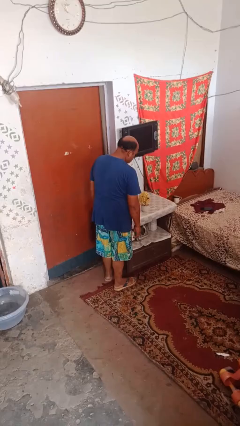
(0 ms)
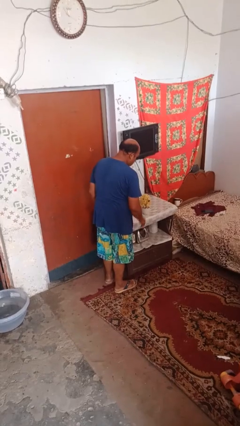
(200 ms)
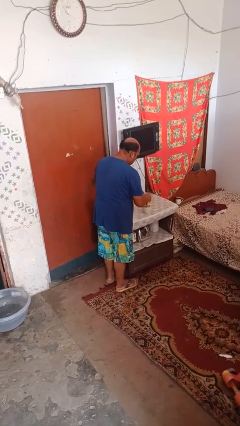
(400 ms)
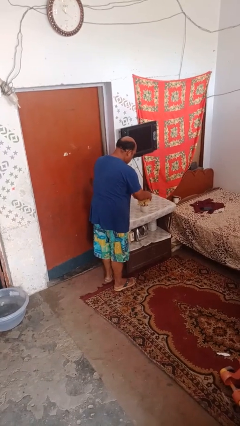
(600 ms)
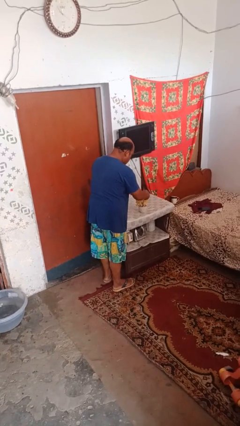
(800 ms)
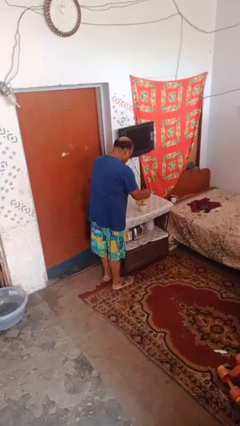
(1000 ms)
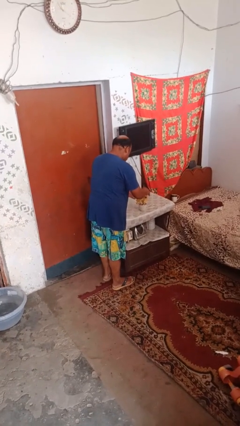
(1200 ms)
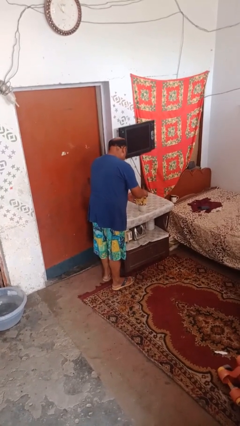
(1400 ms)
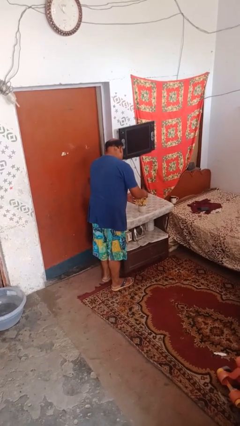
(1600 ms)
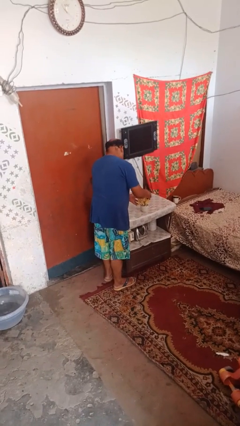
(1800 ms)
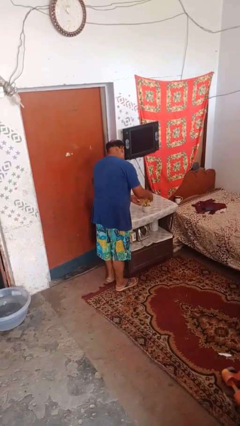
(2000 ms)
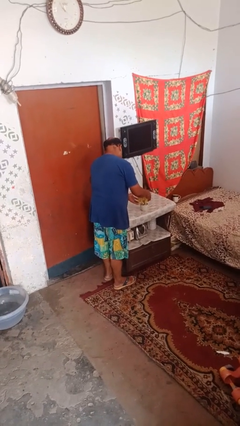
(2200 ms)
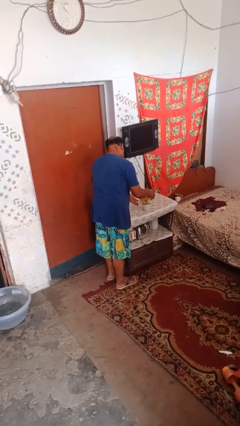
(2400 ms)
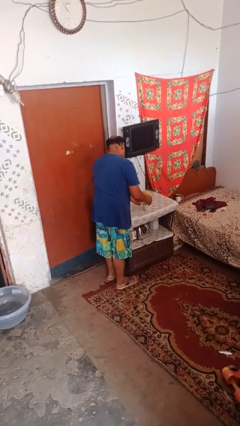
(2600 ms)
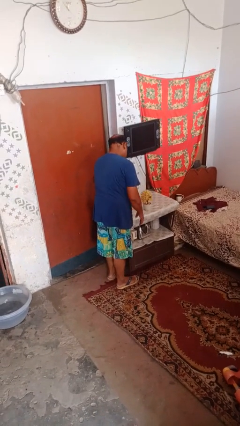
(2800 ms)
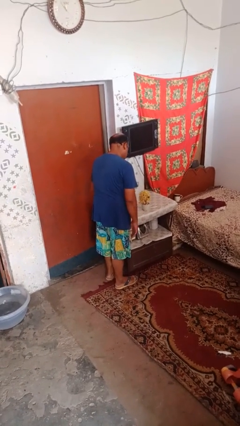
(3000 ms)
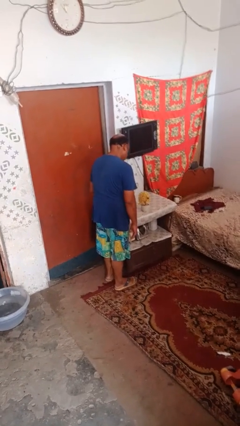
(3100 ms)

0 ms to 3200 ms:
person arranges flowers in vase

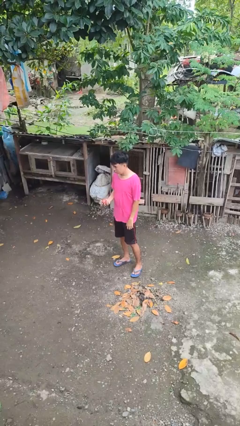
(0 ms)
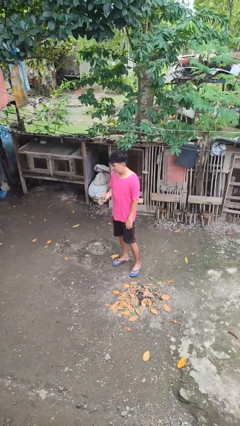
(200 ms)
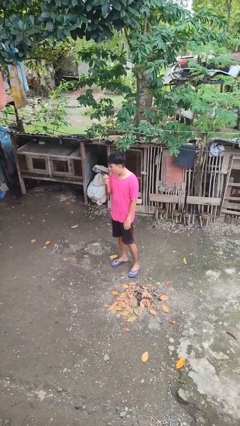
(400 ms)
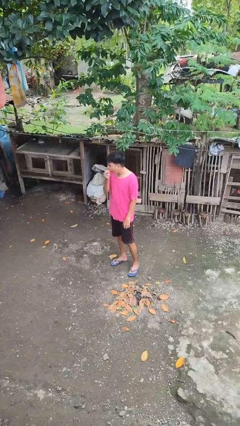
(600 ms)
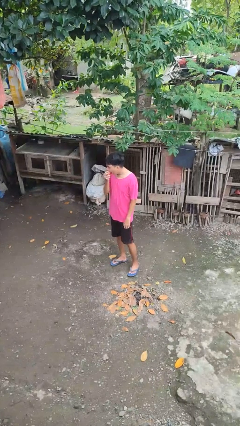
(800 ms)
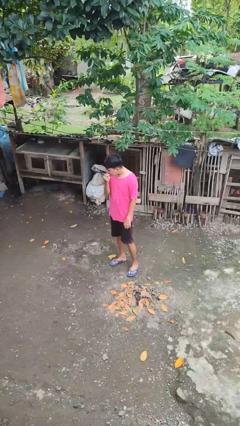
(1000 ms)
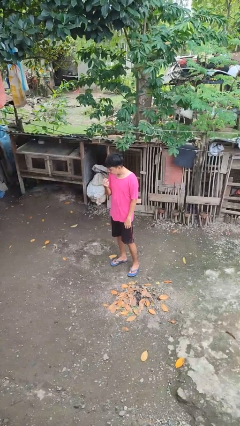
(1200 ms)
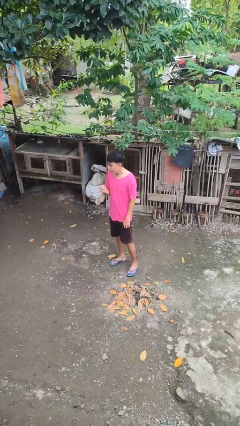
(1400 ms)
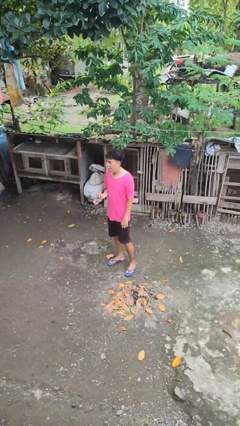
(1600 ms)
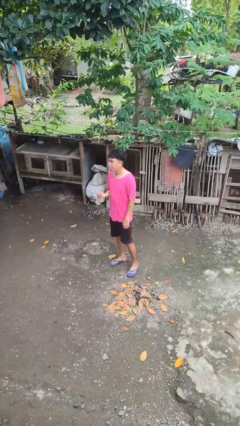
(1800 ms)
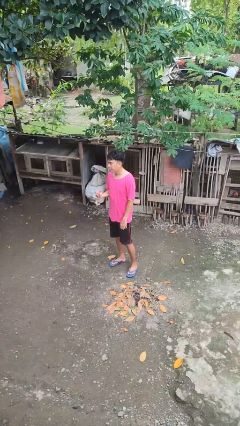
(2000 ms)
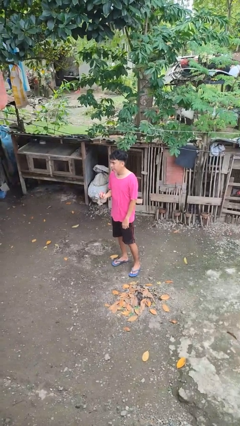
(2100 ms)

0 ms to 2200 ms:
person eats apple

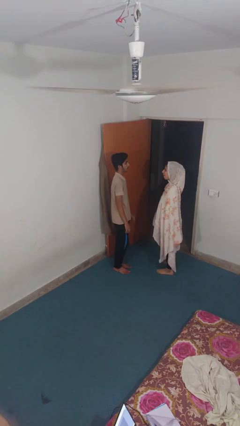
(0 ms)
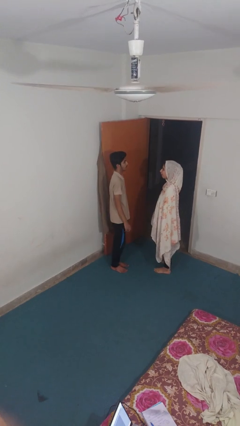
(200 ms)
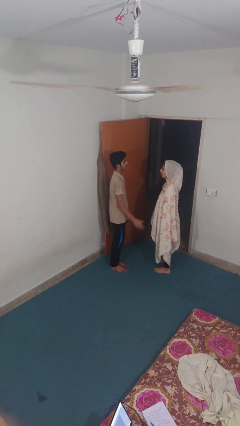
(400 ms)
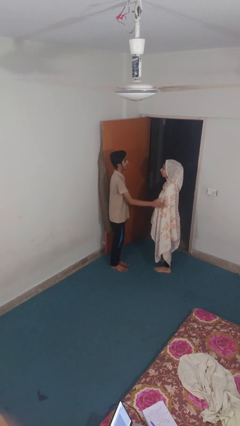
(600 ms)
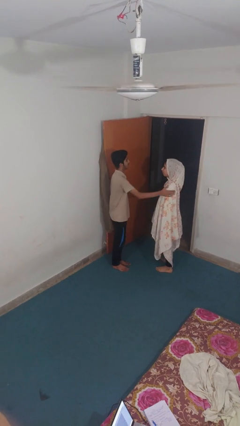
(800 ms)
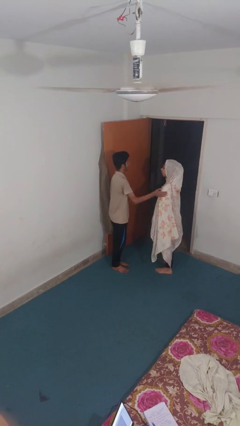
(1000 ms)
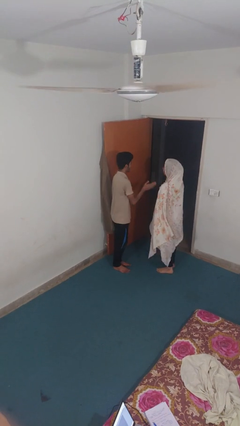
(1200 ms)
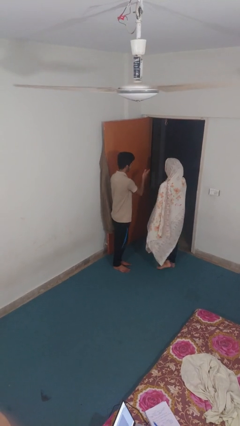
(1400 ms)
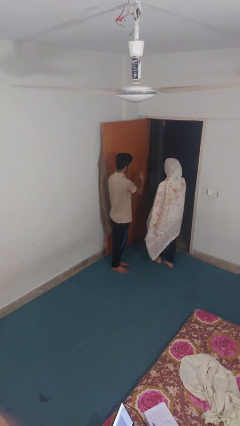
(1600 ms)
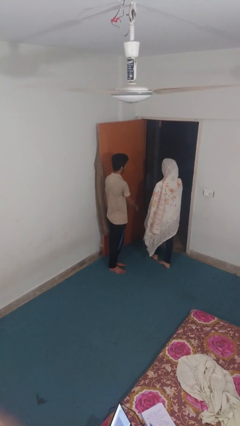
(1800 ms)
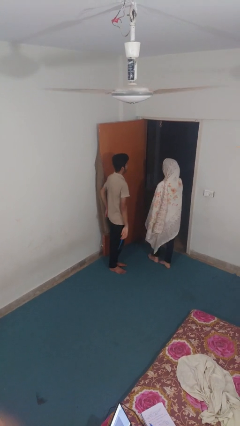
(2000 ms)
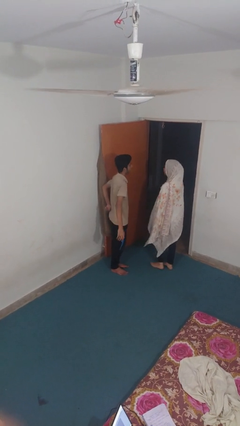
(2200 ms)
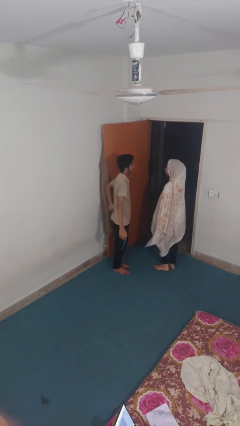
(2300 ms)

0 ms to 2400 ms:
person shoves person

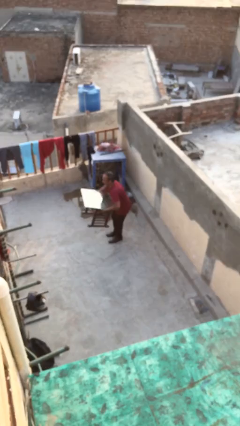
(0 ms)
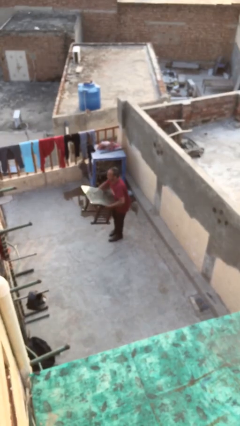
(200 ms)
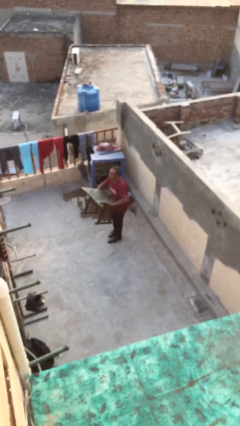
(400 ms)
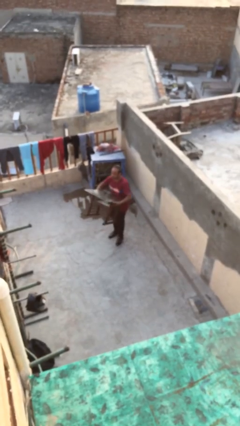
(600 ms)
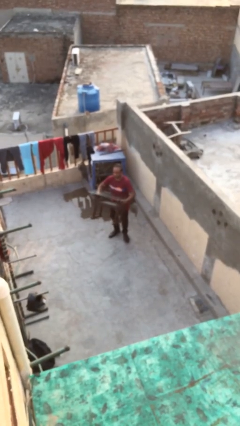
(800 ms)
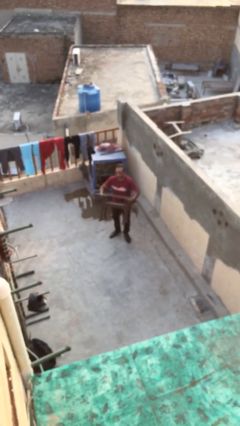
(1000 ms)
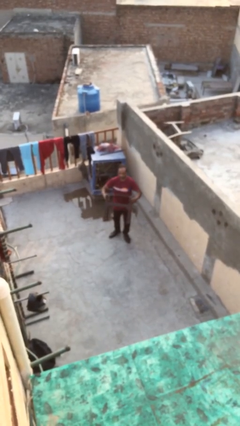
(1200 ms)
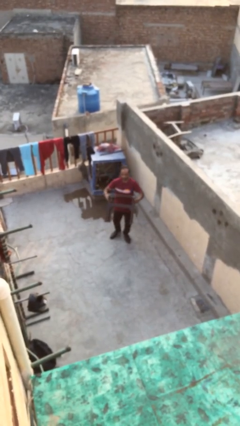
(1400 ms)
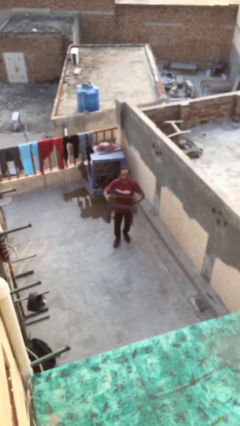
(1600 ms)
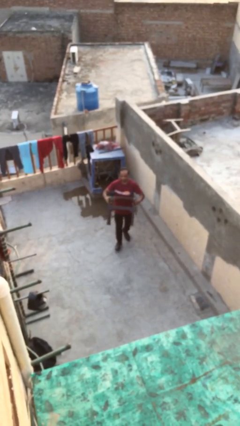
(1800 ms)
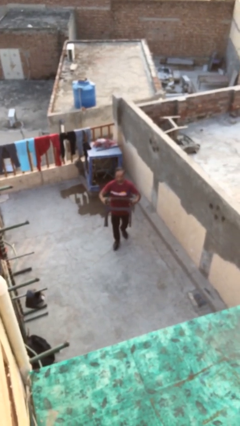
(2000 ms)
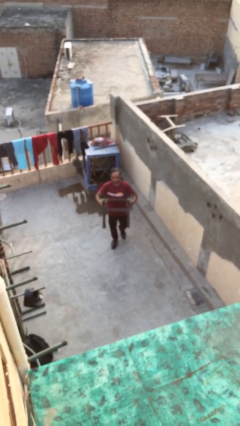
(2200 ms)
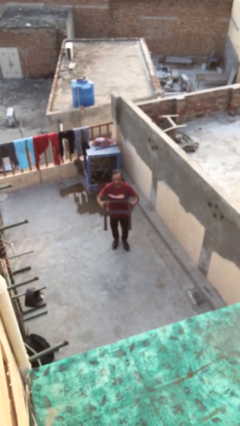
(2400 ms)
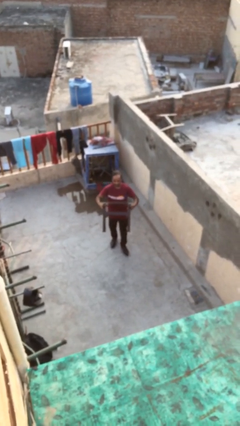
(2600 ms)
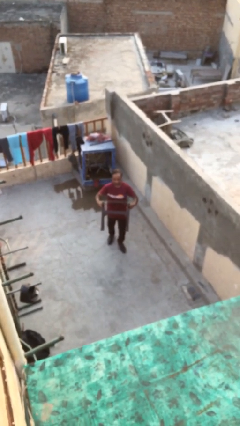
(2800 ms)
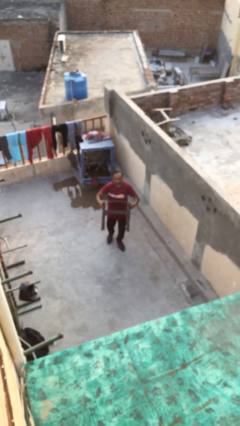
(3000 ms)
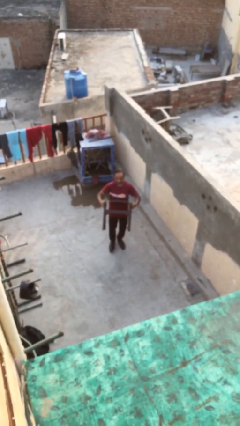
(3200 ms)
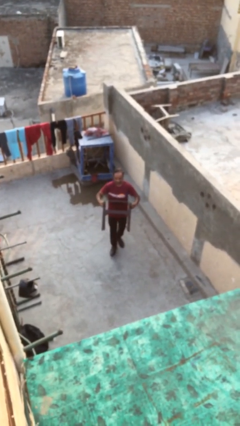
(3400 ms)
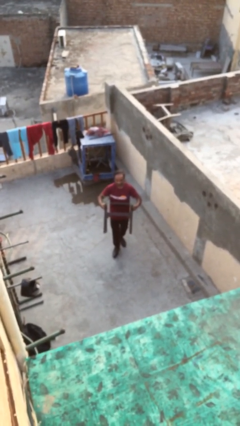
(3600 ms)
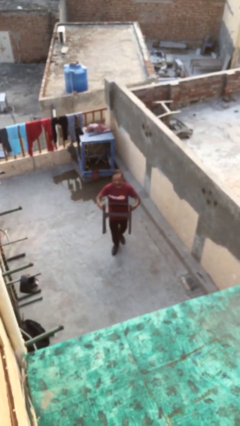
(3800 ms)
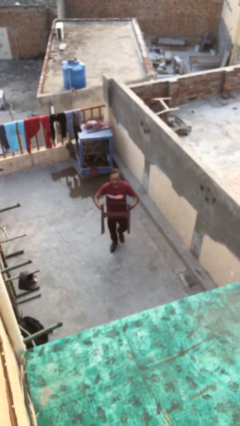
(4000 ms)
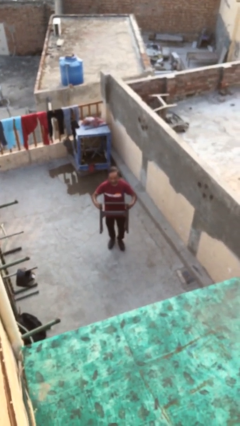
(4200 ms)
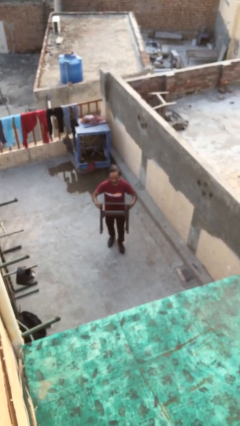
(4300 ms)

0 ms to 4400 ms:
person carries heavy object

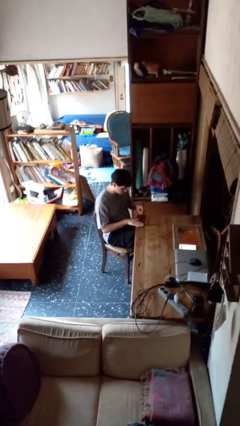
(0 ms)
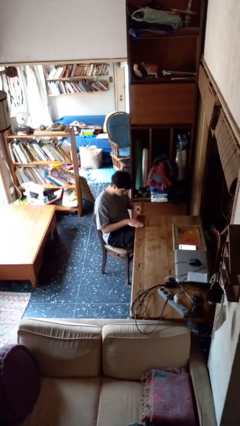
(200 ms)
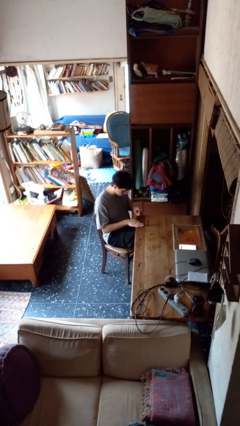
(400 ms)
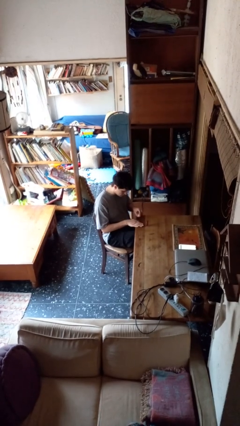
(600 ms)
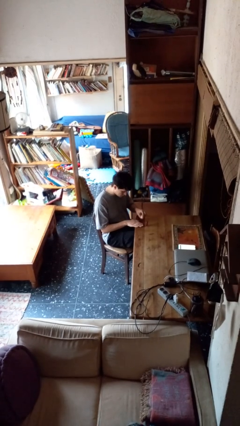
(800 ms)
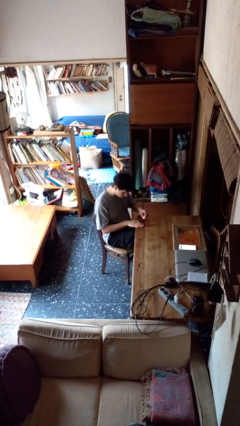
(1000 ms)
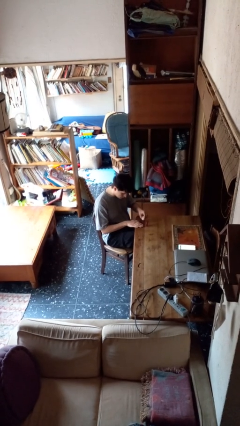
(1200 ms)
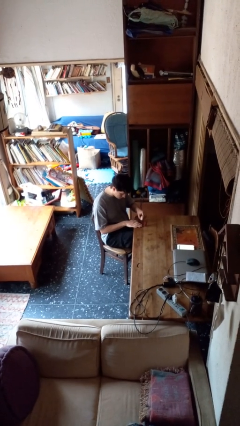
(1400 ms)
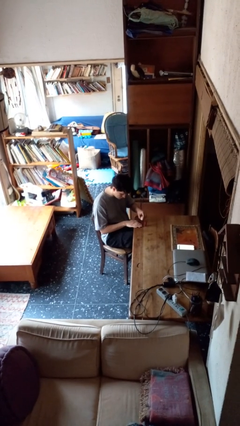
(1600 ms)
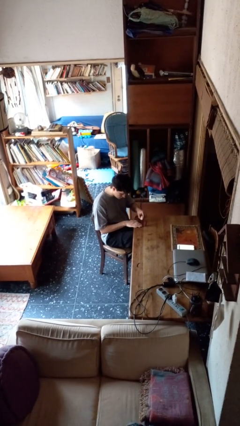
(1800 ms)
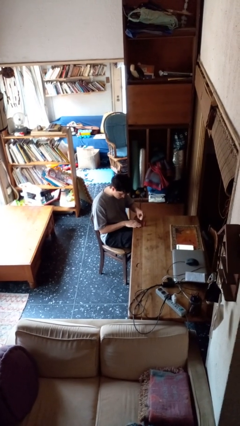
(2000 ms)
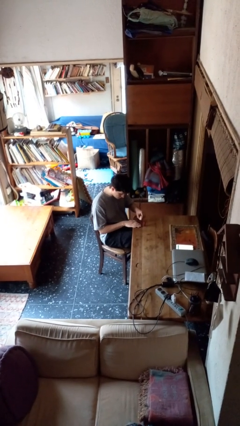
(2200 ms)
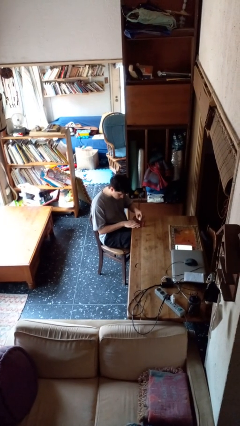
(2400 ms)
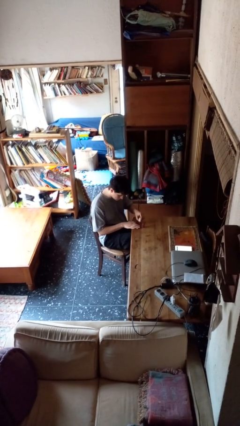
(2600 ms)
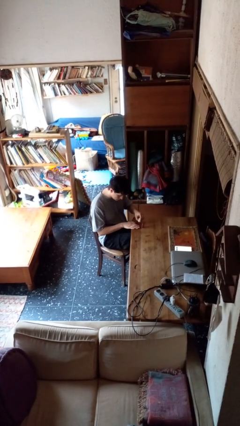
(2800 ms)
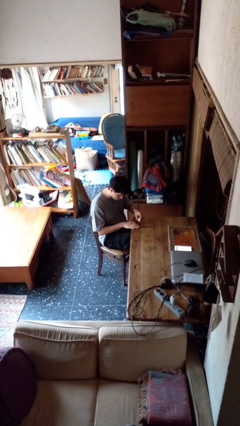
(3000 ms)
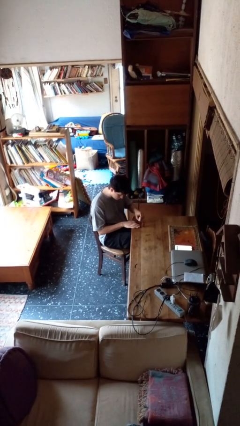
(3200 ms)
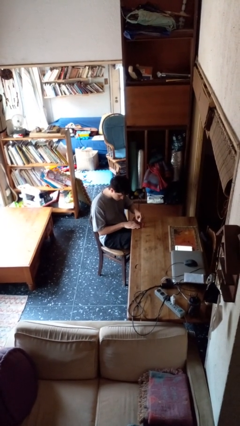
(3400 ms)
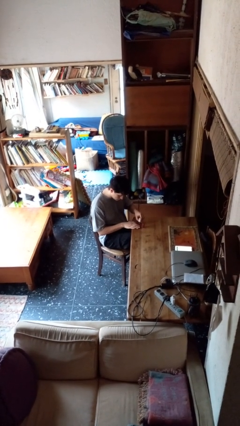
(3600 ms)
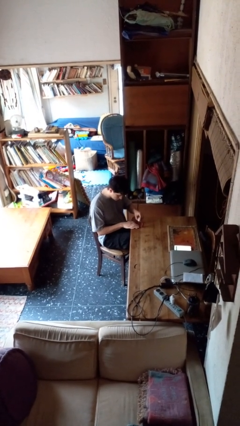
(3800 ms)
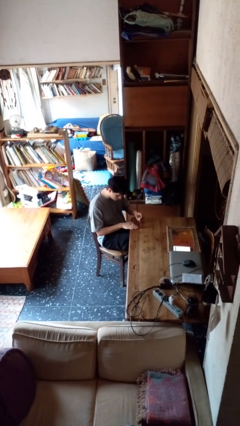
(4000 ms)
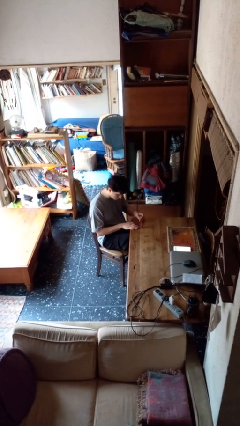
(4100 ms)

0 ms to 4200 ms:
person paints fingernails

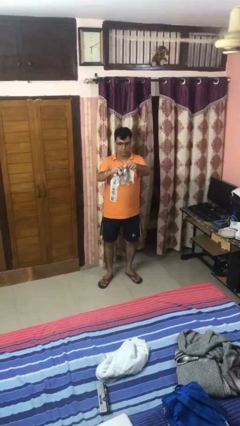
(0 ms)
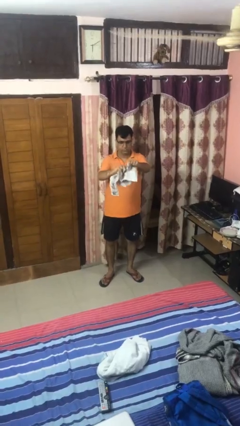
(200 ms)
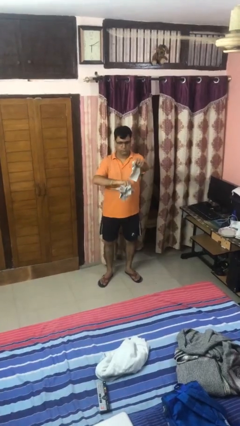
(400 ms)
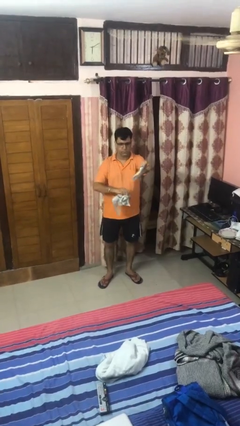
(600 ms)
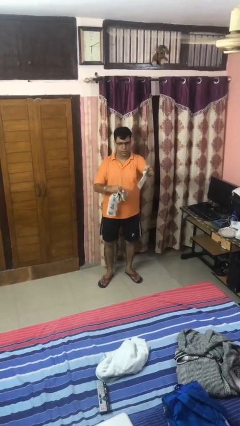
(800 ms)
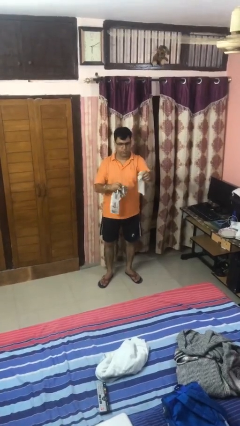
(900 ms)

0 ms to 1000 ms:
person tears paper
